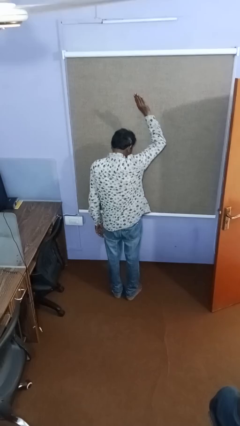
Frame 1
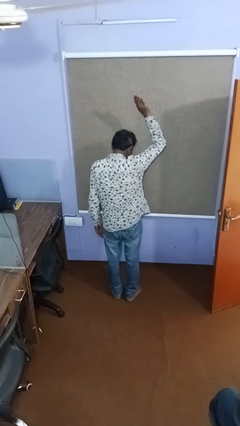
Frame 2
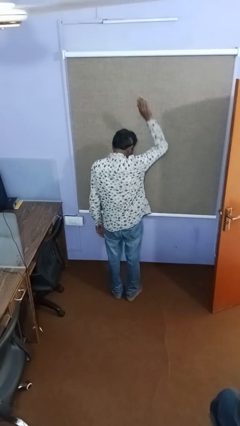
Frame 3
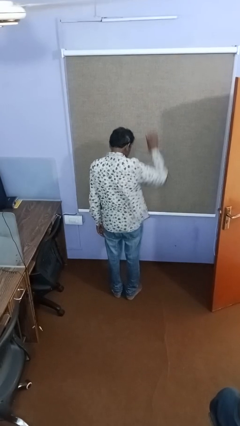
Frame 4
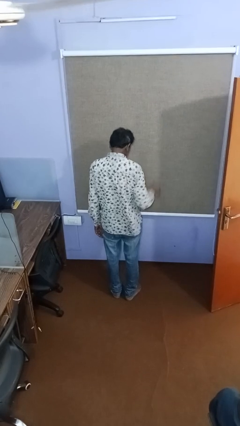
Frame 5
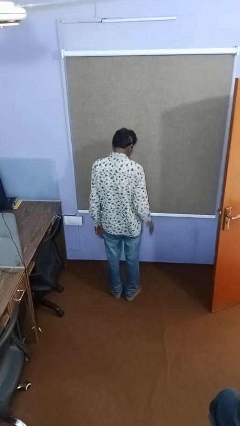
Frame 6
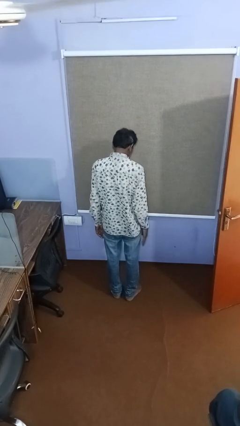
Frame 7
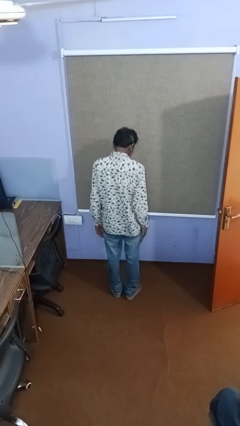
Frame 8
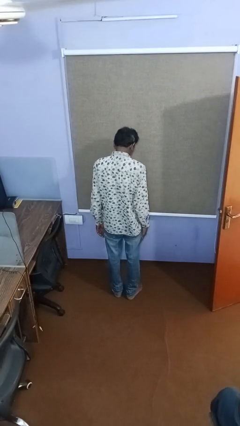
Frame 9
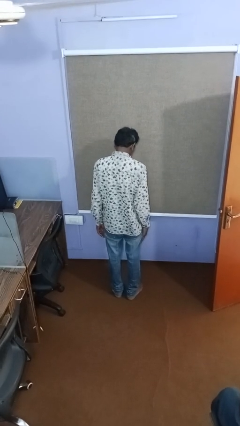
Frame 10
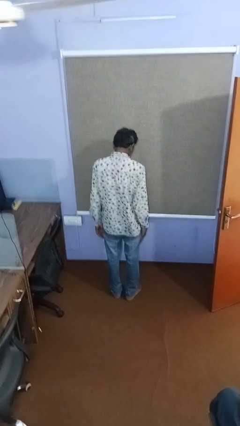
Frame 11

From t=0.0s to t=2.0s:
person gestures lower hand

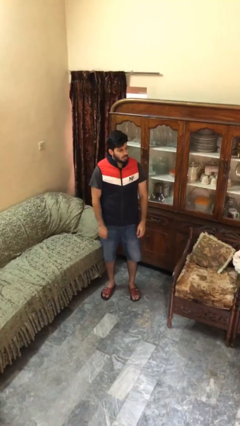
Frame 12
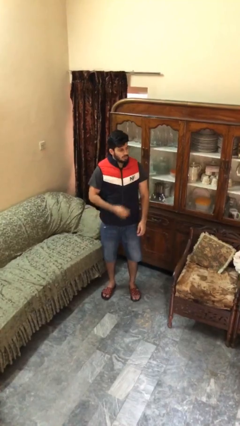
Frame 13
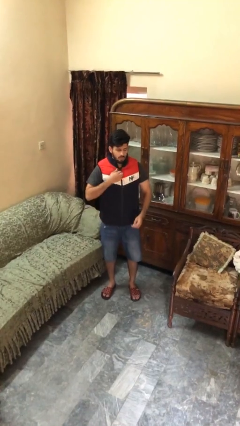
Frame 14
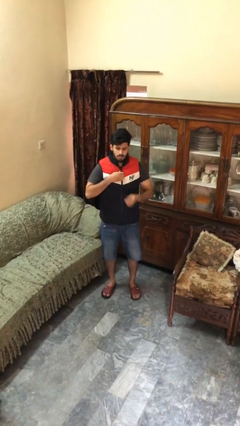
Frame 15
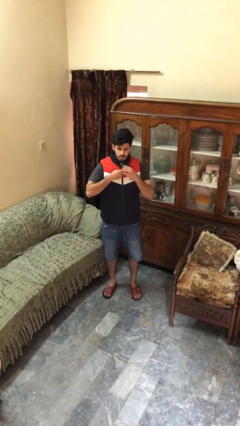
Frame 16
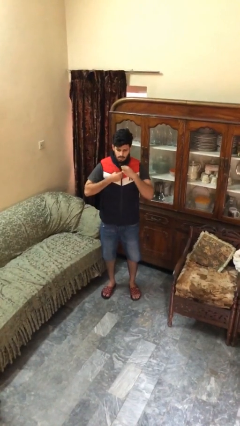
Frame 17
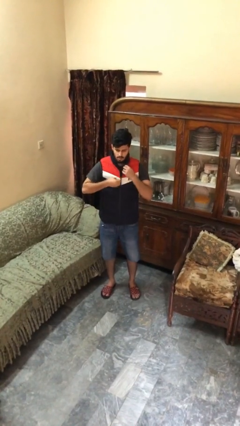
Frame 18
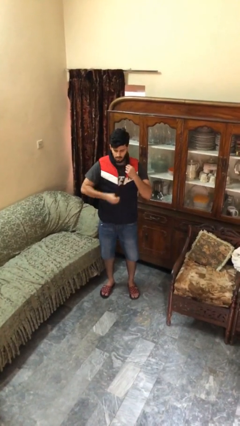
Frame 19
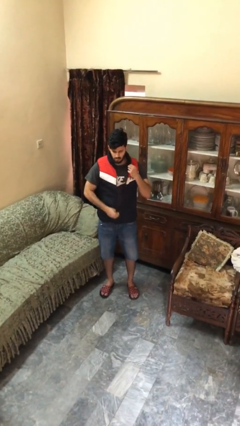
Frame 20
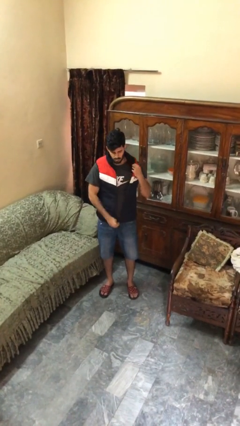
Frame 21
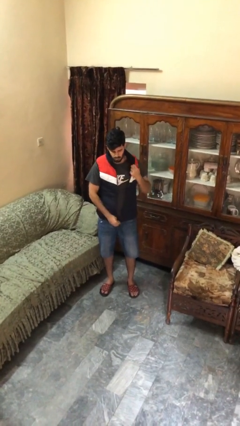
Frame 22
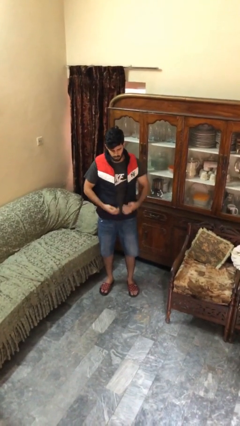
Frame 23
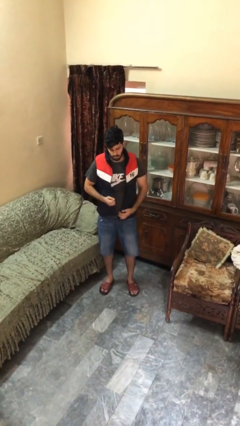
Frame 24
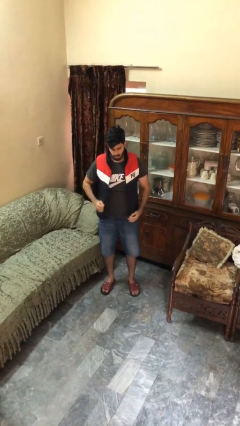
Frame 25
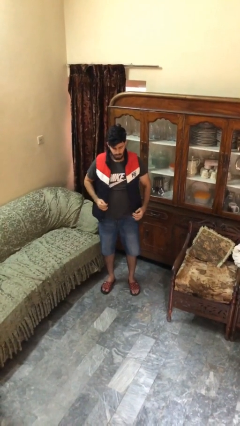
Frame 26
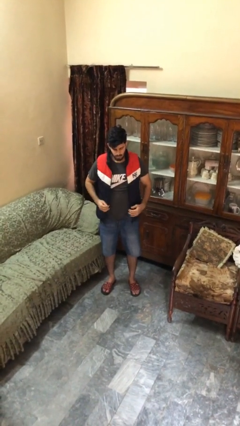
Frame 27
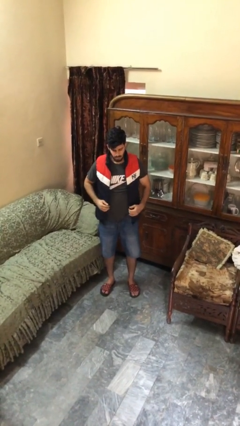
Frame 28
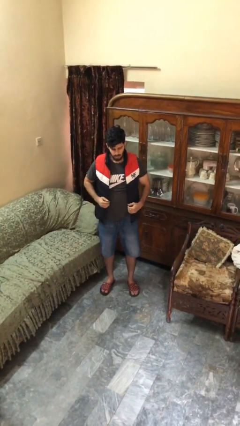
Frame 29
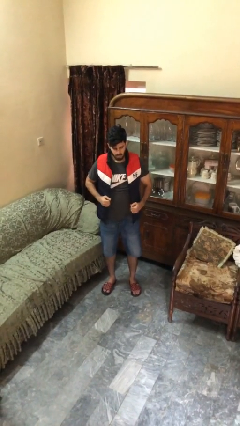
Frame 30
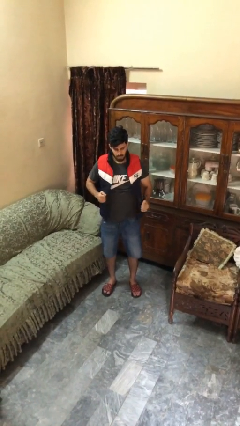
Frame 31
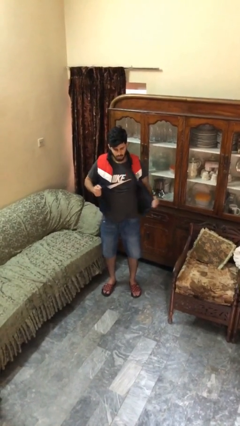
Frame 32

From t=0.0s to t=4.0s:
person unzips jacket

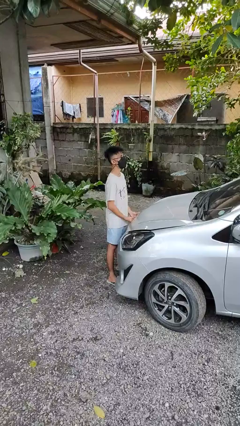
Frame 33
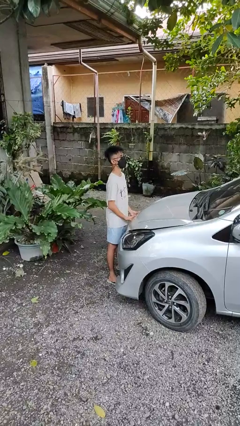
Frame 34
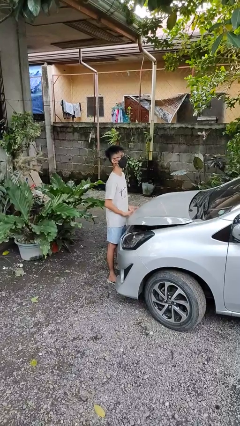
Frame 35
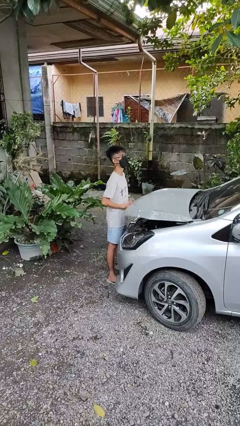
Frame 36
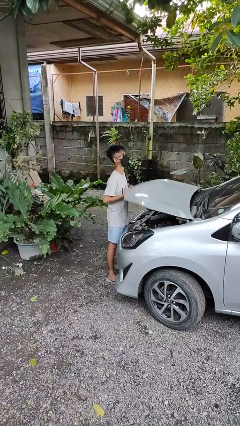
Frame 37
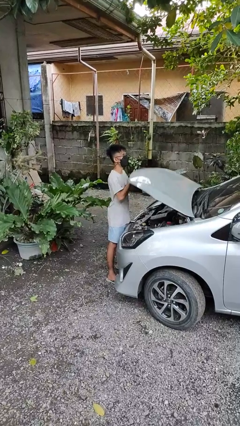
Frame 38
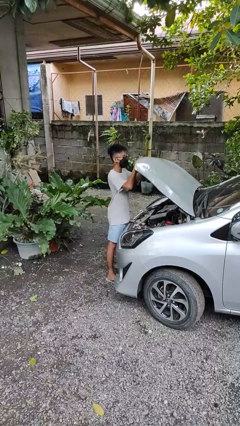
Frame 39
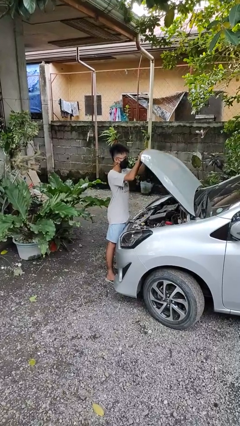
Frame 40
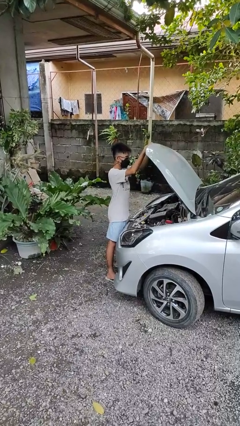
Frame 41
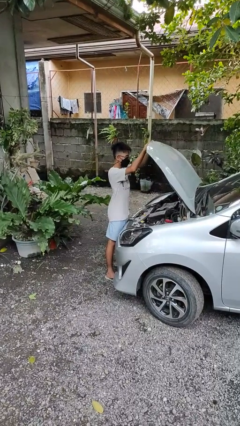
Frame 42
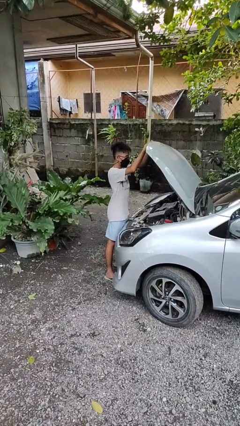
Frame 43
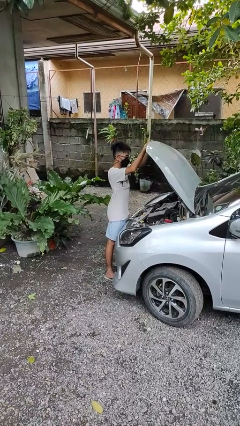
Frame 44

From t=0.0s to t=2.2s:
person opens car hood

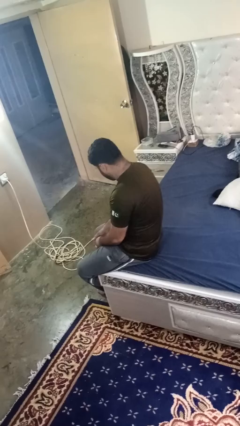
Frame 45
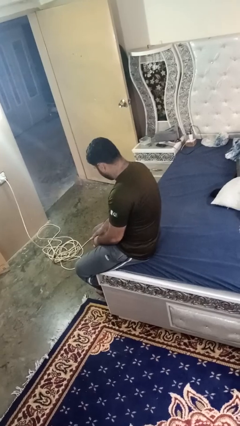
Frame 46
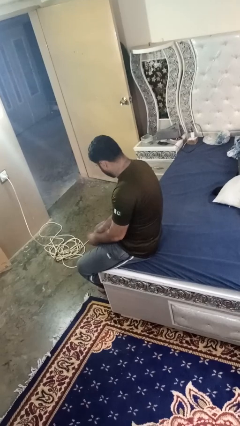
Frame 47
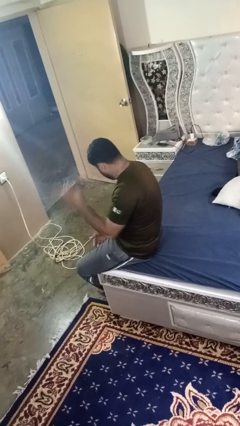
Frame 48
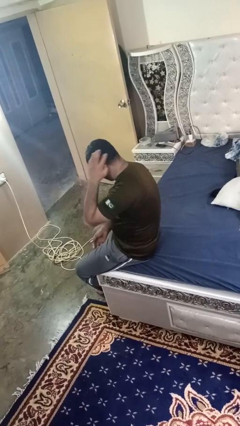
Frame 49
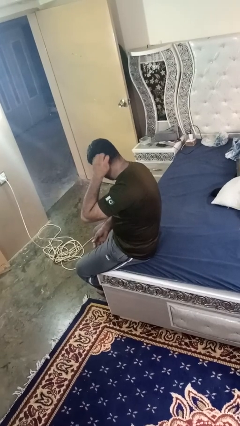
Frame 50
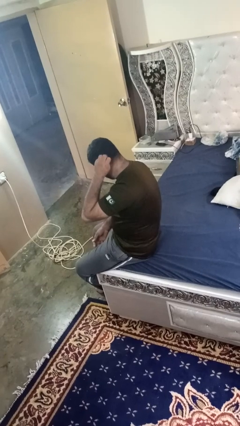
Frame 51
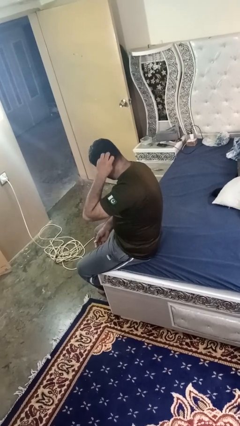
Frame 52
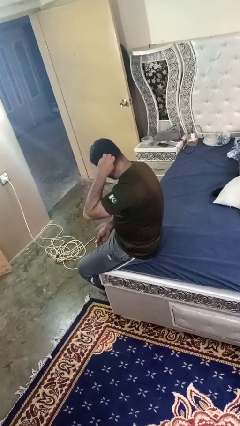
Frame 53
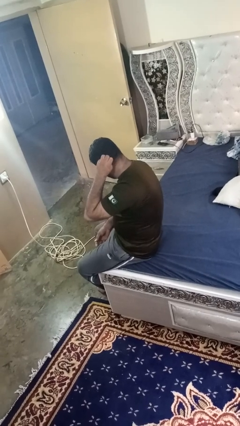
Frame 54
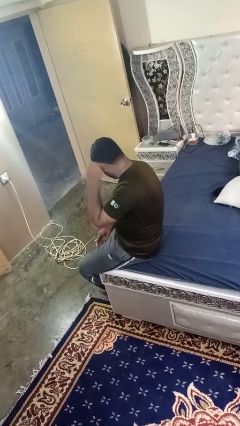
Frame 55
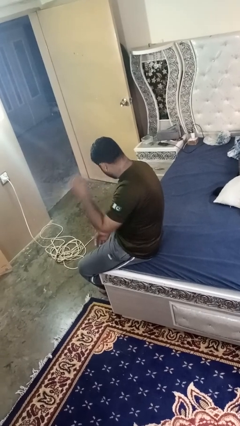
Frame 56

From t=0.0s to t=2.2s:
person strokes hair

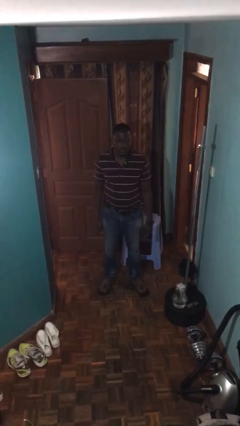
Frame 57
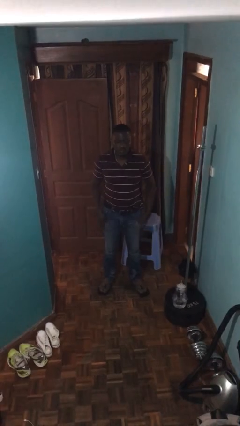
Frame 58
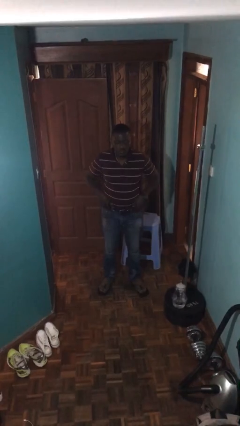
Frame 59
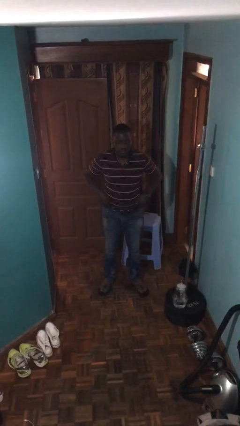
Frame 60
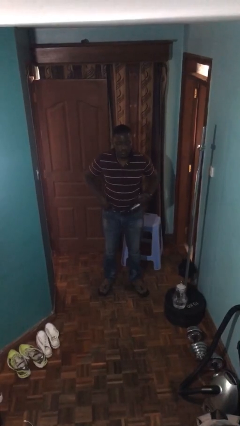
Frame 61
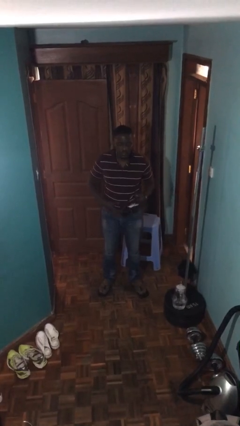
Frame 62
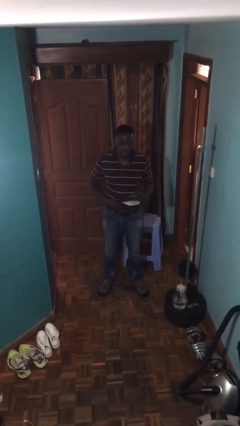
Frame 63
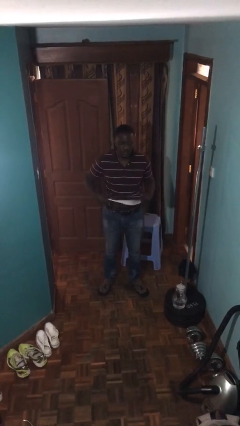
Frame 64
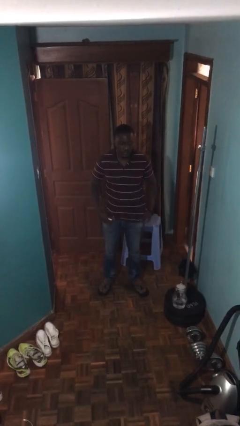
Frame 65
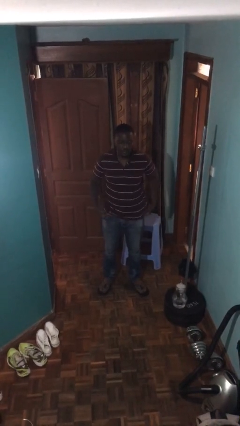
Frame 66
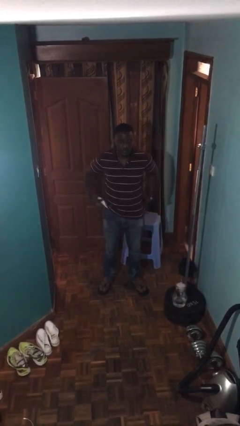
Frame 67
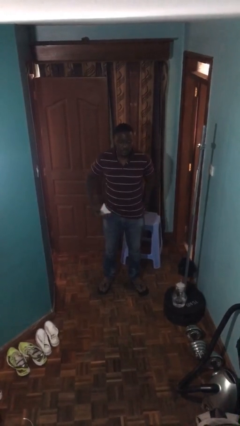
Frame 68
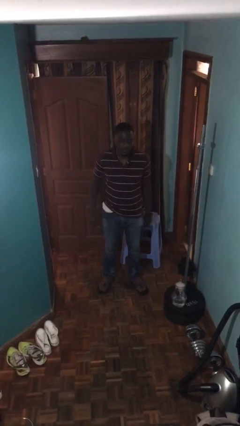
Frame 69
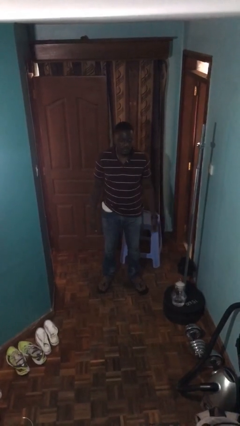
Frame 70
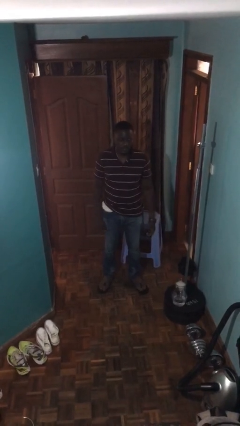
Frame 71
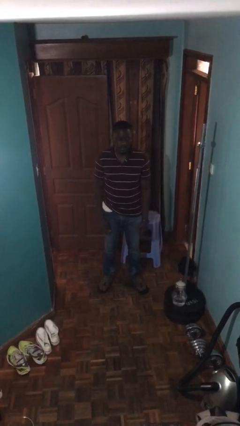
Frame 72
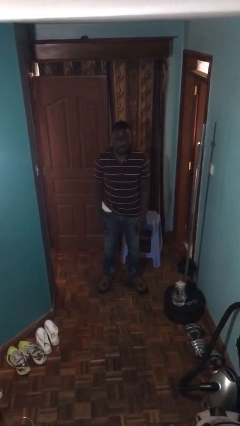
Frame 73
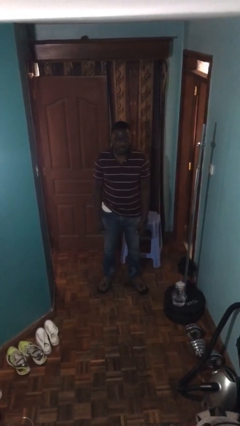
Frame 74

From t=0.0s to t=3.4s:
person untucks shirt

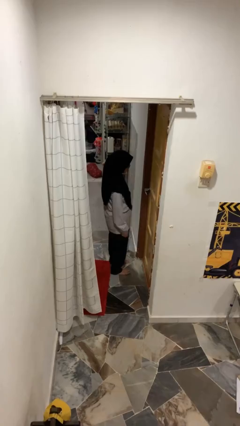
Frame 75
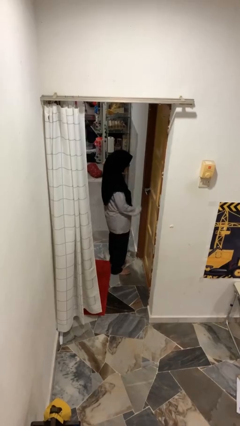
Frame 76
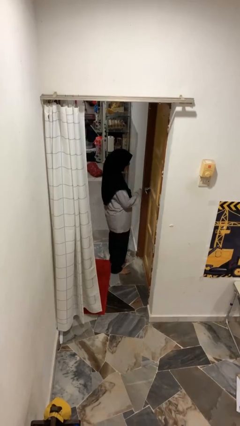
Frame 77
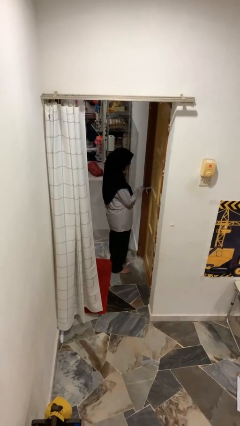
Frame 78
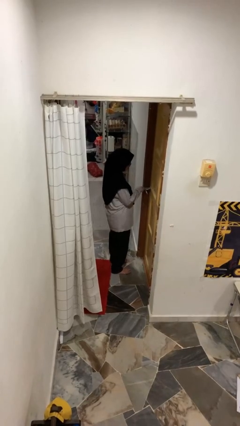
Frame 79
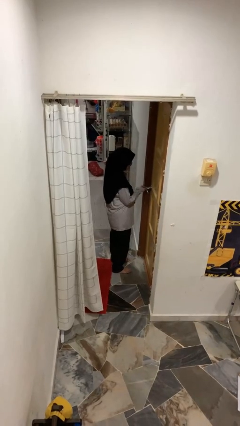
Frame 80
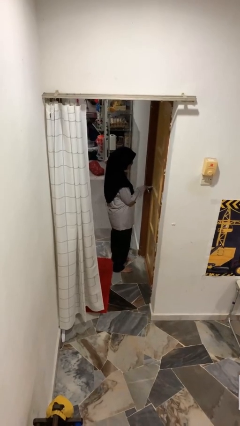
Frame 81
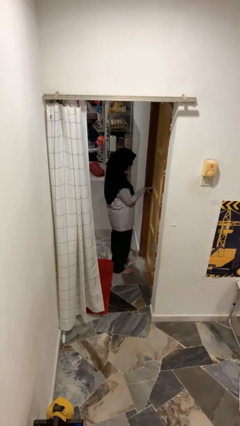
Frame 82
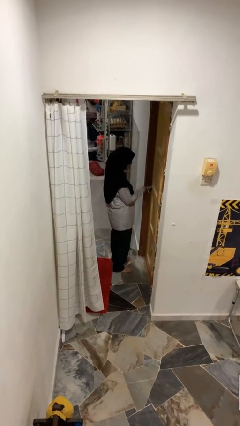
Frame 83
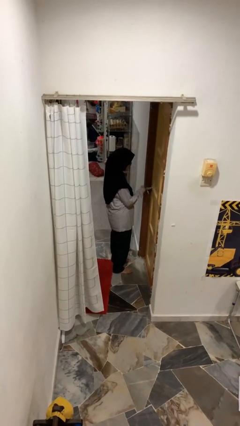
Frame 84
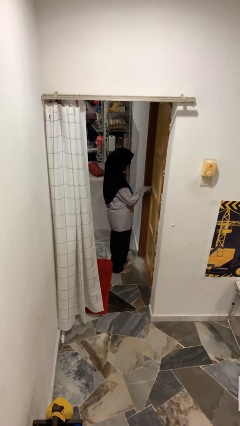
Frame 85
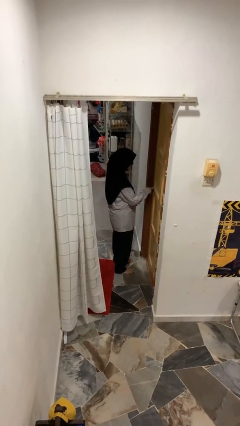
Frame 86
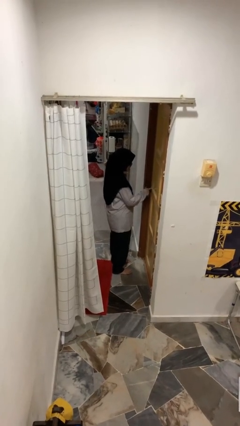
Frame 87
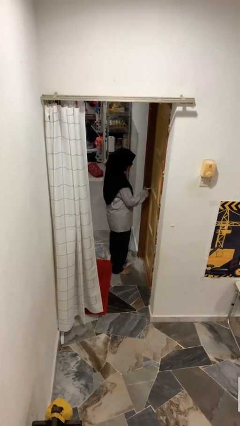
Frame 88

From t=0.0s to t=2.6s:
person unlocks door with keys

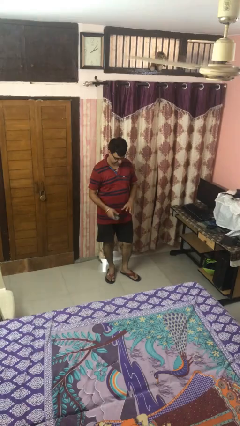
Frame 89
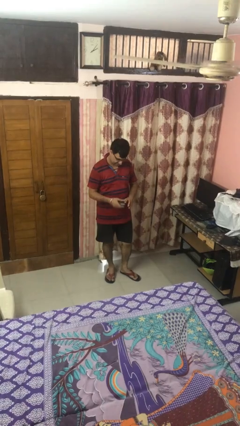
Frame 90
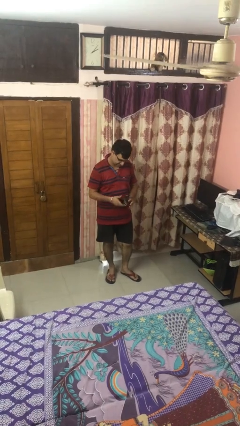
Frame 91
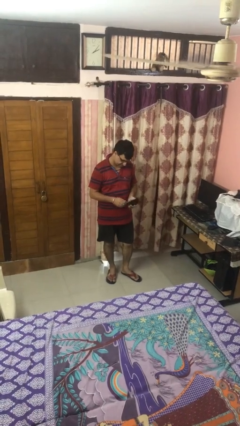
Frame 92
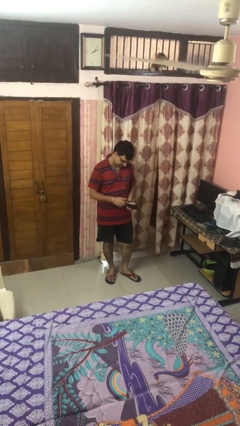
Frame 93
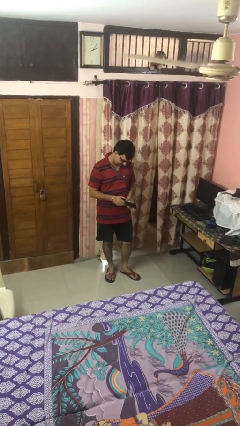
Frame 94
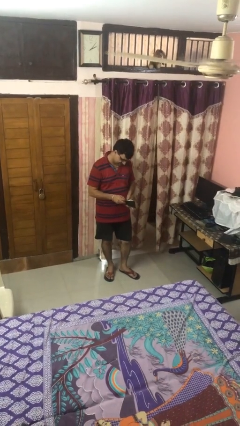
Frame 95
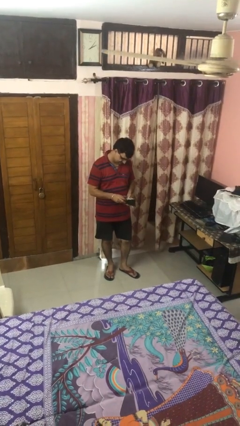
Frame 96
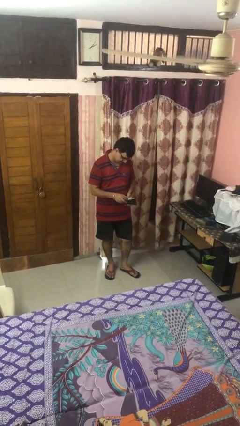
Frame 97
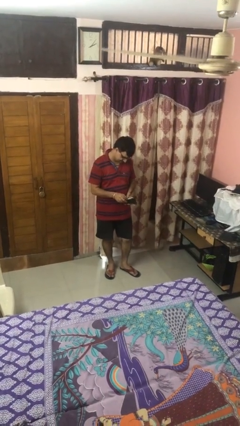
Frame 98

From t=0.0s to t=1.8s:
person searches in purse
